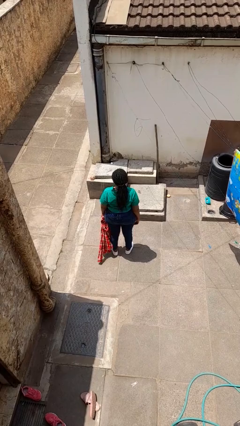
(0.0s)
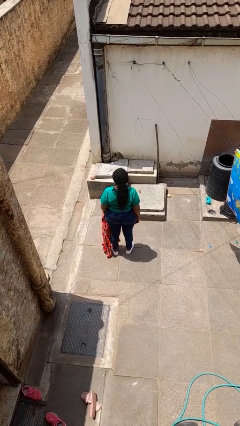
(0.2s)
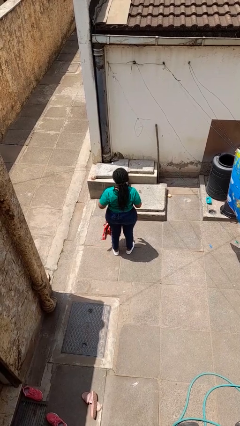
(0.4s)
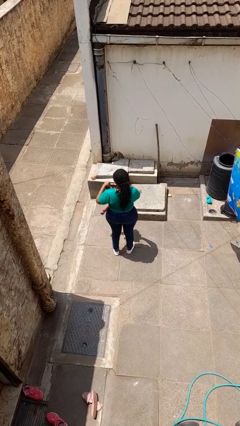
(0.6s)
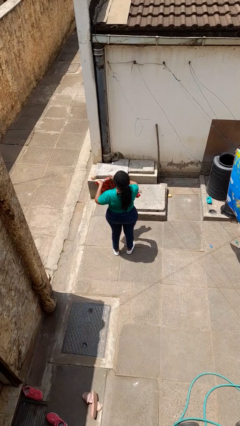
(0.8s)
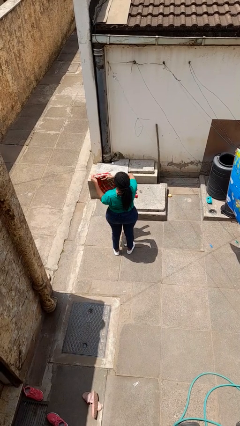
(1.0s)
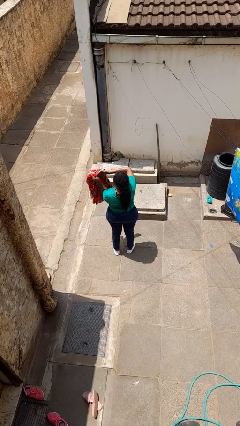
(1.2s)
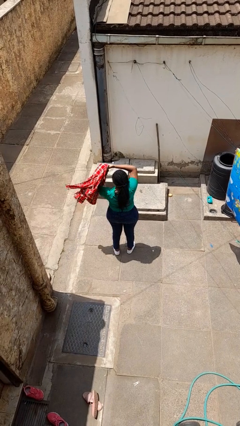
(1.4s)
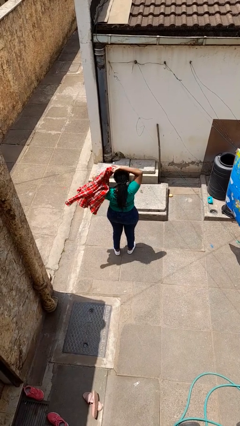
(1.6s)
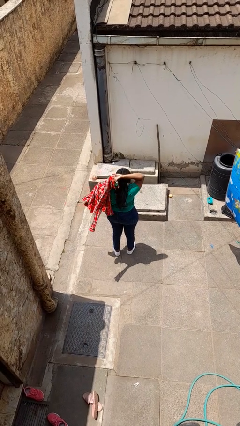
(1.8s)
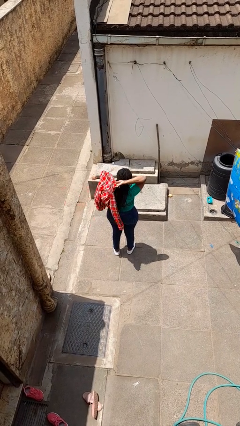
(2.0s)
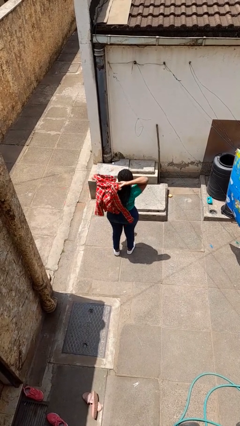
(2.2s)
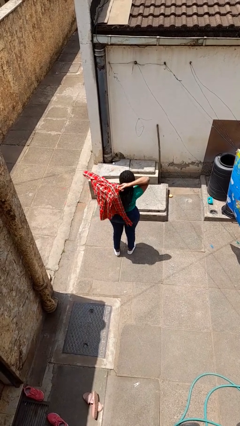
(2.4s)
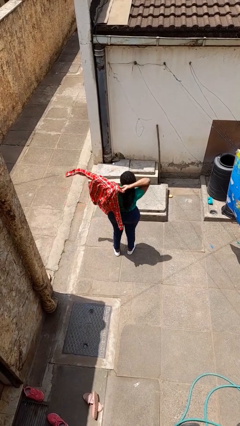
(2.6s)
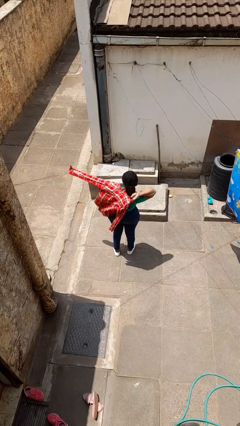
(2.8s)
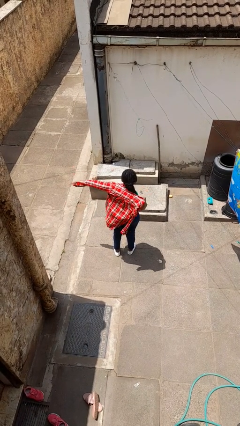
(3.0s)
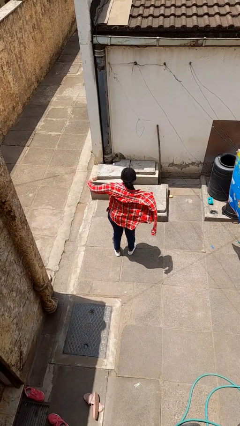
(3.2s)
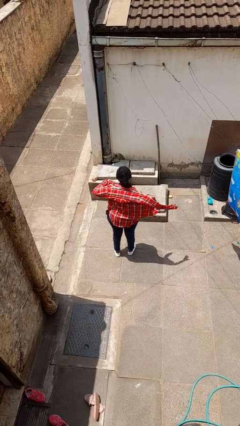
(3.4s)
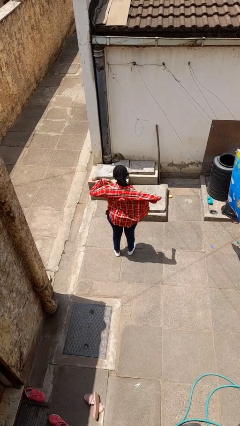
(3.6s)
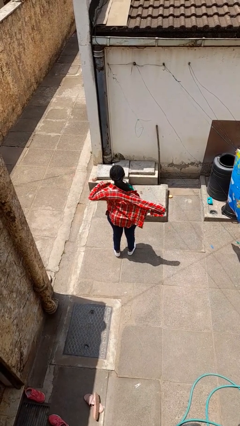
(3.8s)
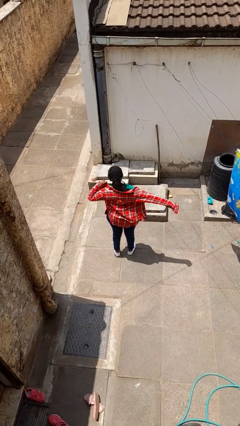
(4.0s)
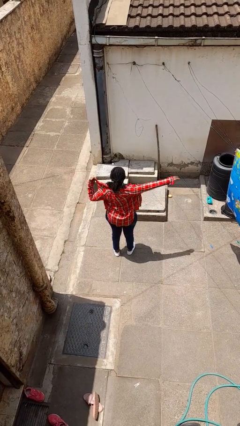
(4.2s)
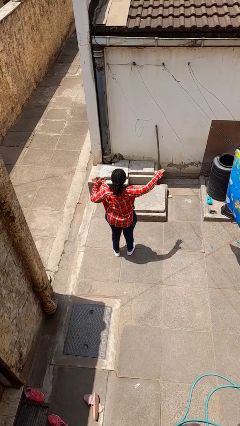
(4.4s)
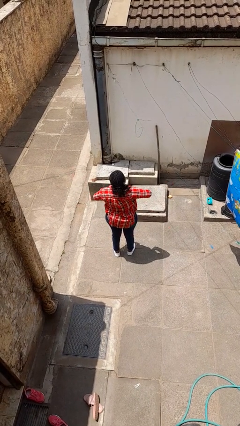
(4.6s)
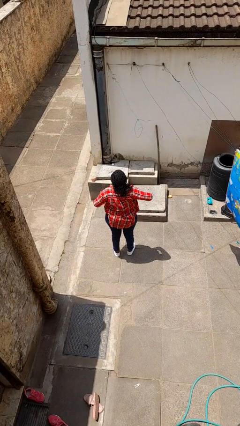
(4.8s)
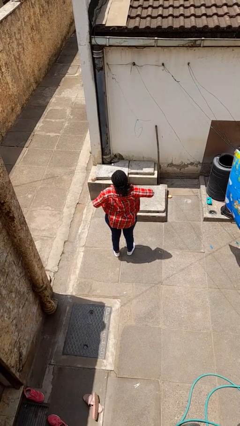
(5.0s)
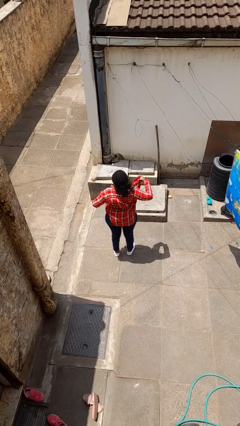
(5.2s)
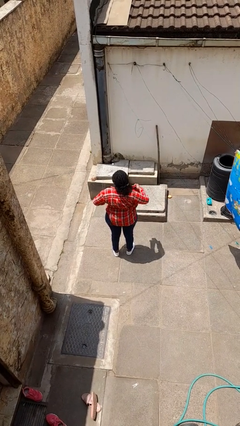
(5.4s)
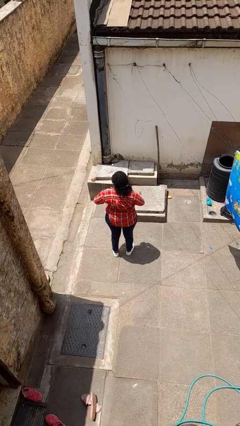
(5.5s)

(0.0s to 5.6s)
person puts on shirt

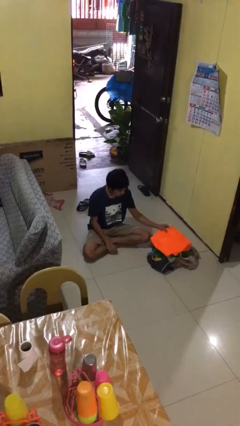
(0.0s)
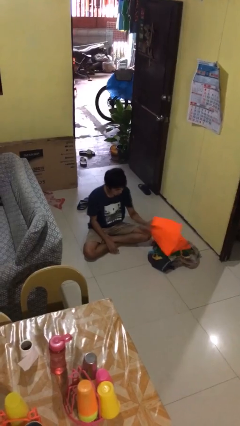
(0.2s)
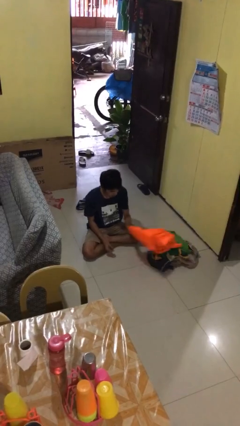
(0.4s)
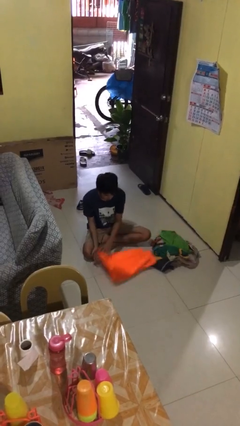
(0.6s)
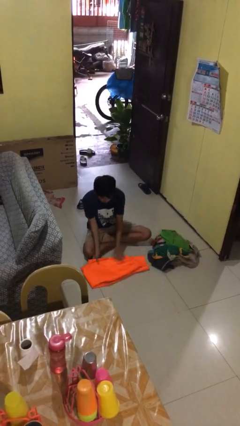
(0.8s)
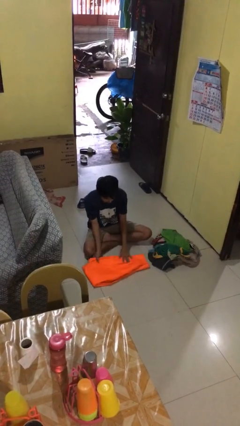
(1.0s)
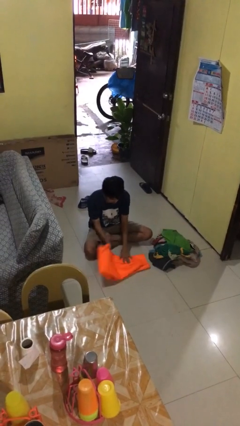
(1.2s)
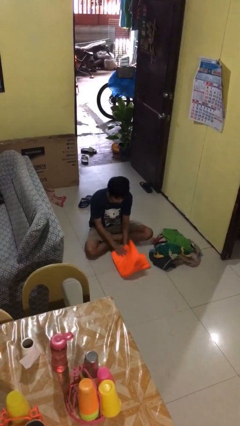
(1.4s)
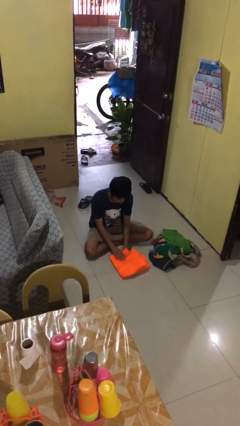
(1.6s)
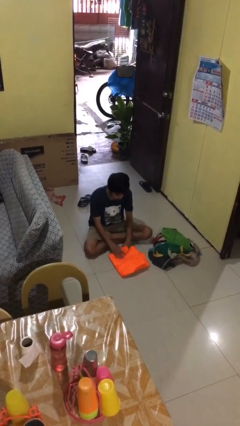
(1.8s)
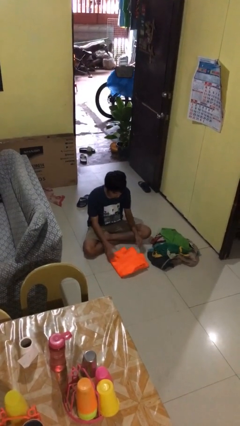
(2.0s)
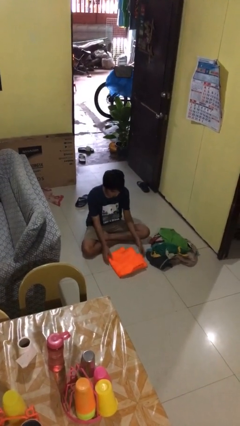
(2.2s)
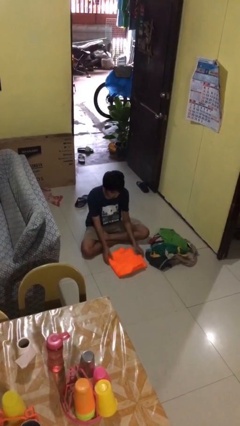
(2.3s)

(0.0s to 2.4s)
person folds pants

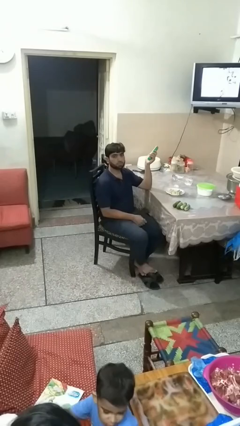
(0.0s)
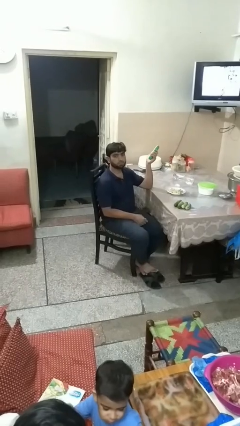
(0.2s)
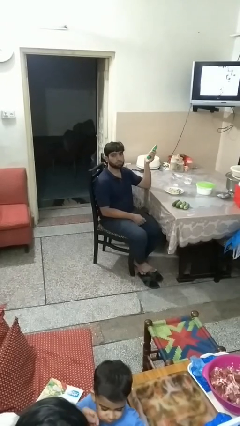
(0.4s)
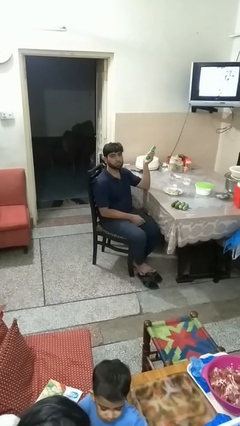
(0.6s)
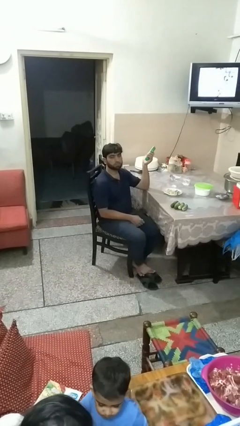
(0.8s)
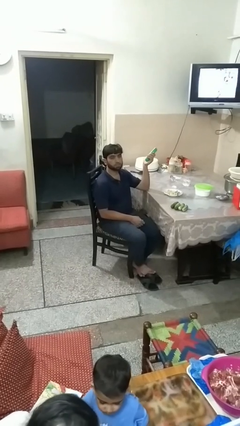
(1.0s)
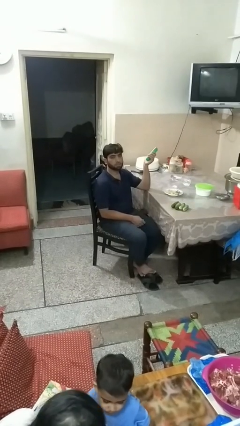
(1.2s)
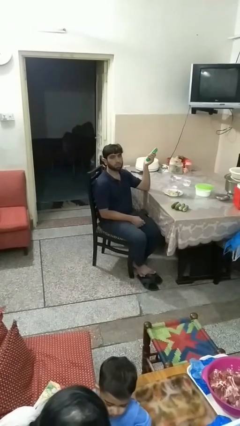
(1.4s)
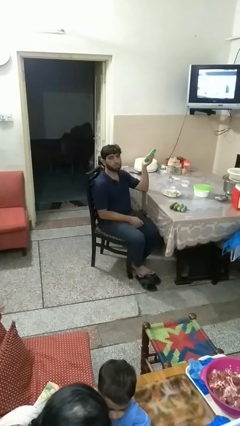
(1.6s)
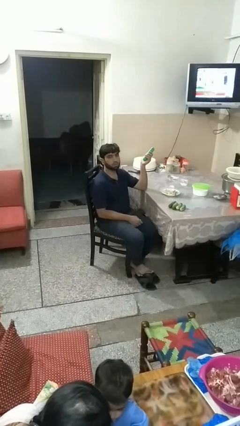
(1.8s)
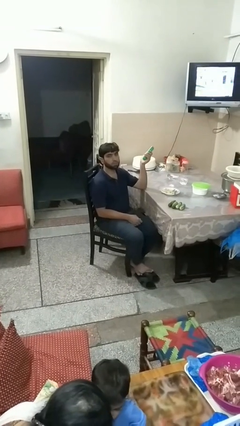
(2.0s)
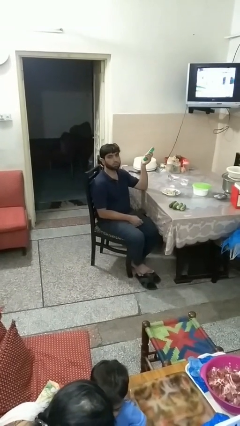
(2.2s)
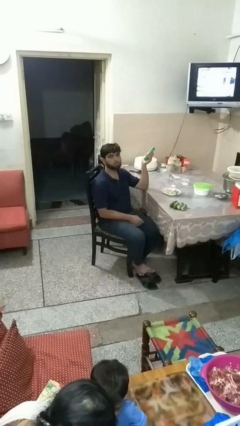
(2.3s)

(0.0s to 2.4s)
person uses television remote

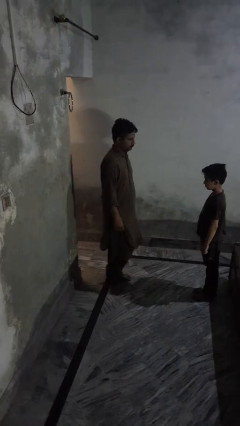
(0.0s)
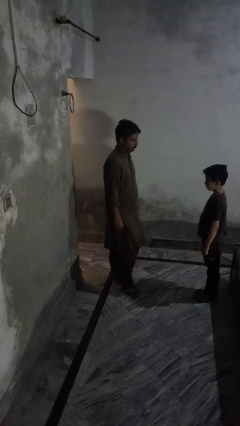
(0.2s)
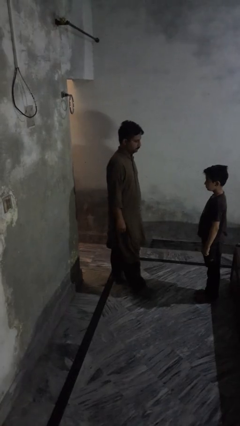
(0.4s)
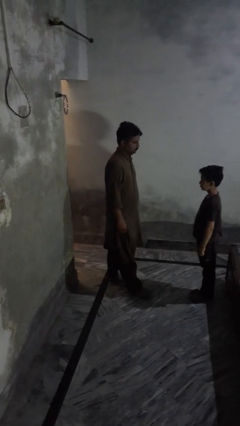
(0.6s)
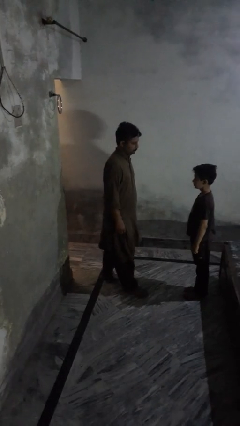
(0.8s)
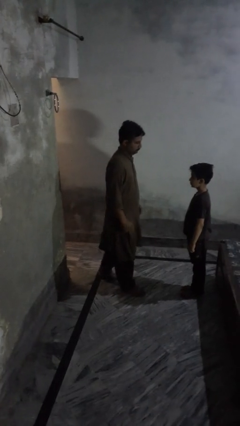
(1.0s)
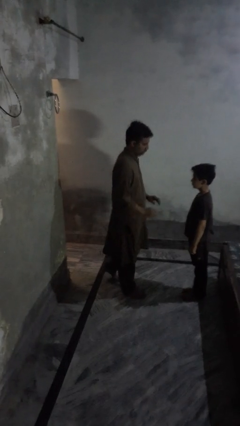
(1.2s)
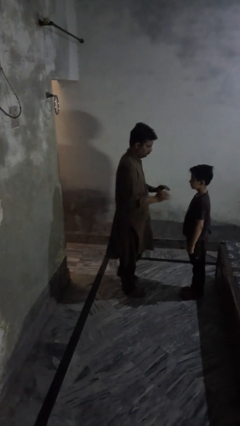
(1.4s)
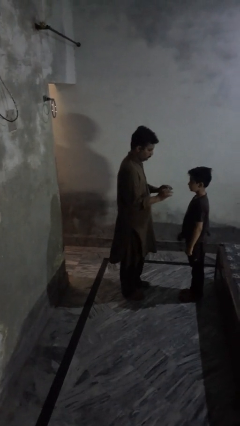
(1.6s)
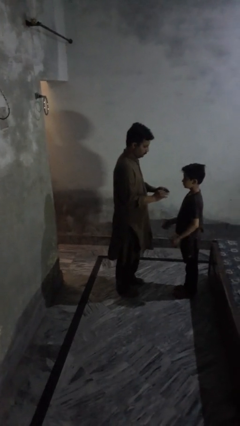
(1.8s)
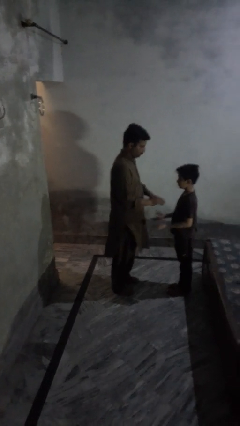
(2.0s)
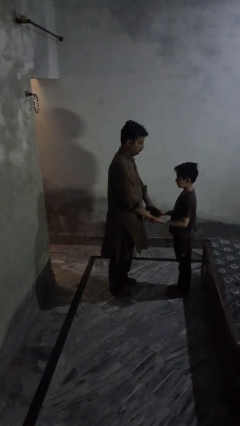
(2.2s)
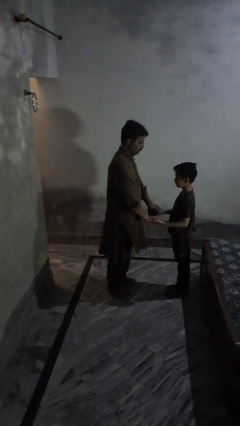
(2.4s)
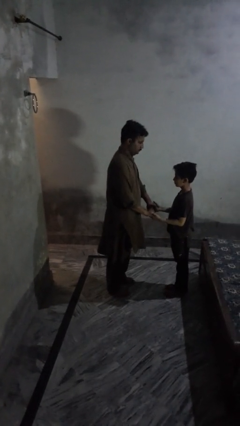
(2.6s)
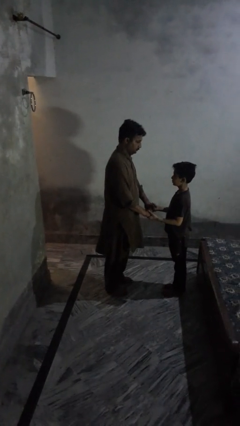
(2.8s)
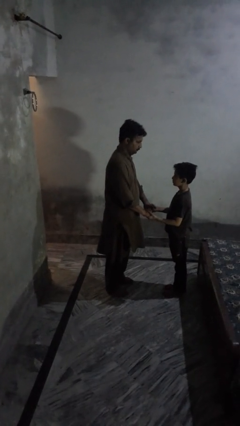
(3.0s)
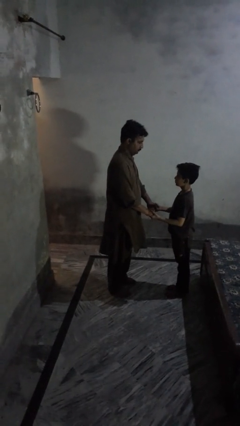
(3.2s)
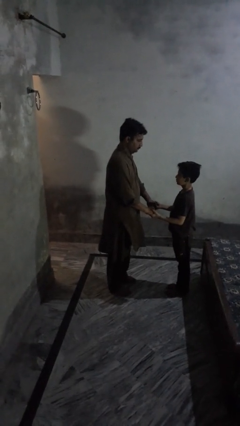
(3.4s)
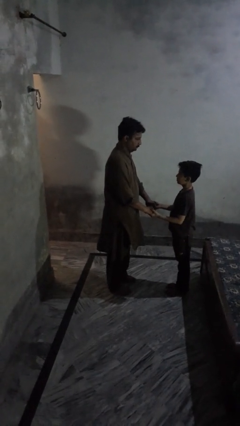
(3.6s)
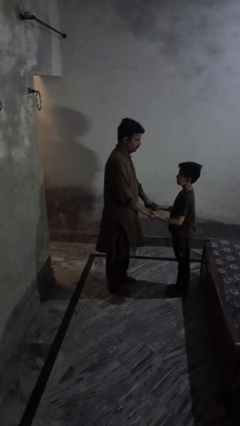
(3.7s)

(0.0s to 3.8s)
person highfives hand

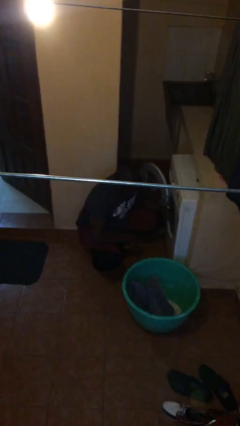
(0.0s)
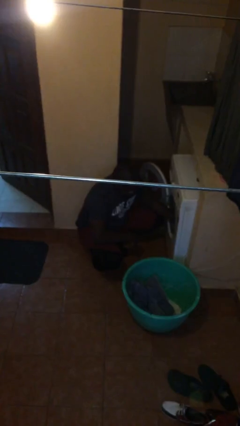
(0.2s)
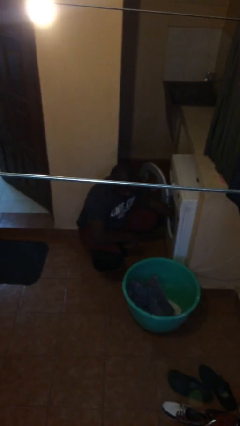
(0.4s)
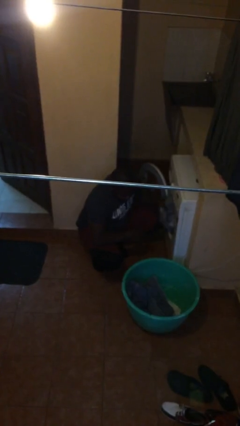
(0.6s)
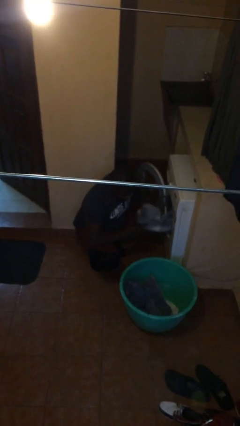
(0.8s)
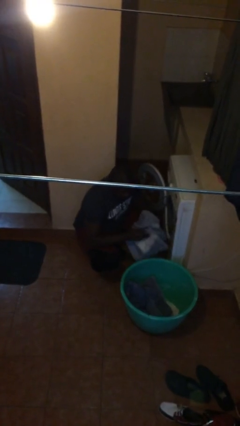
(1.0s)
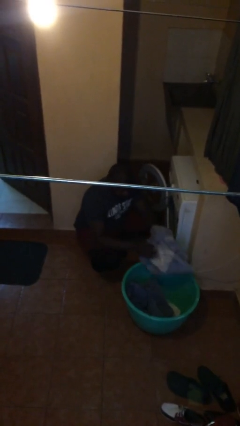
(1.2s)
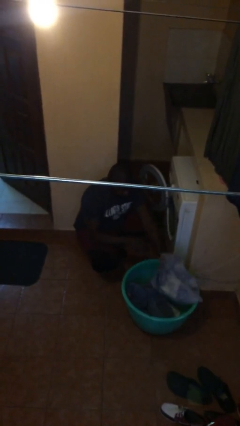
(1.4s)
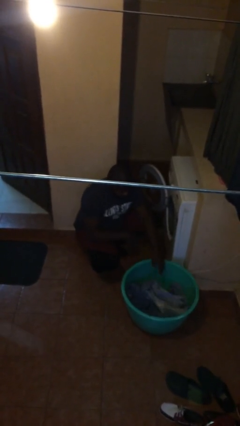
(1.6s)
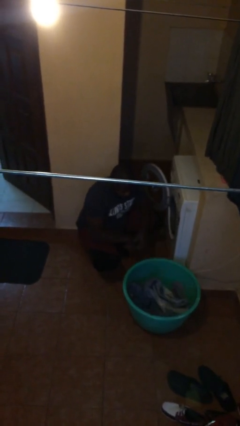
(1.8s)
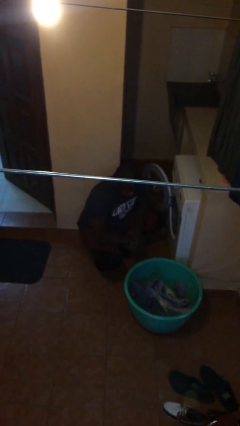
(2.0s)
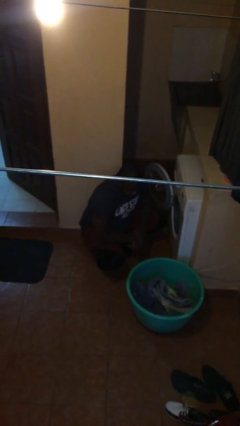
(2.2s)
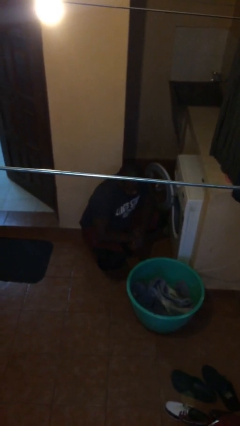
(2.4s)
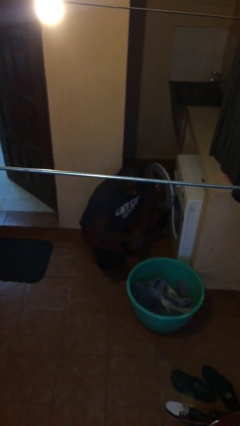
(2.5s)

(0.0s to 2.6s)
person unloads dryer

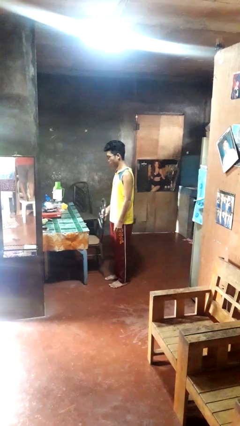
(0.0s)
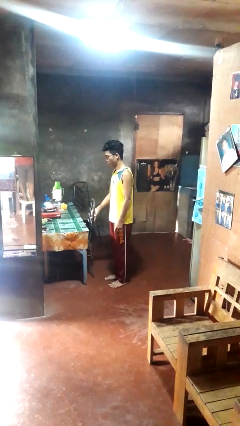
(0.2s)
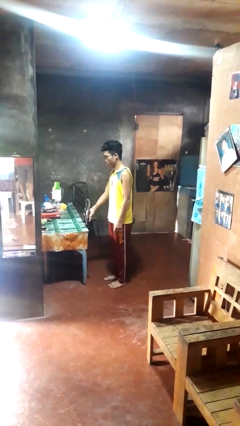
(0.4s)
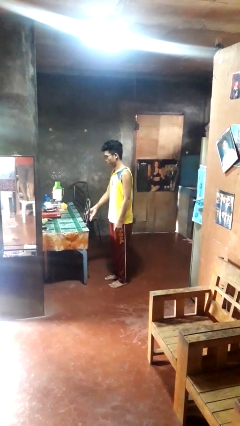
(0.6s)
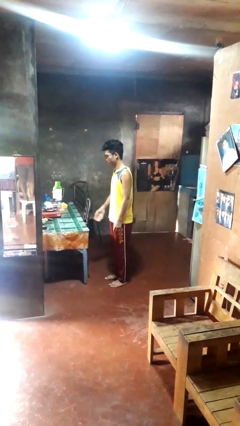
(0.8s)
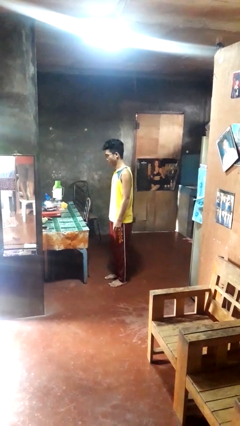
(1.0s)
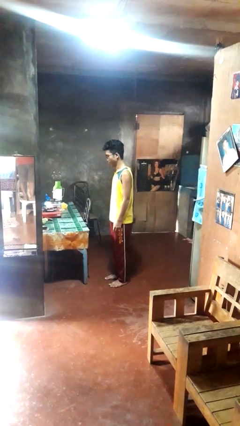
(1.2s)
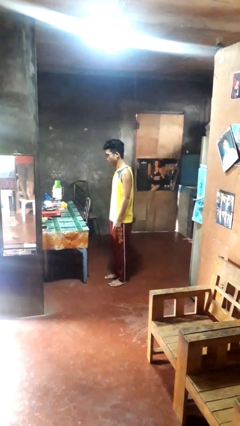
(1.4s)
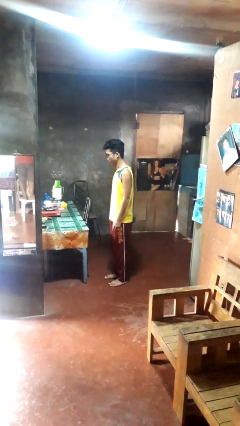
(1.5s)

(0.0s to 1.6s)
person pushes in chair
